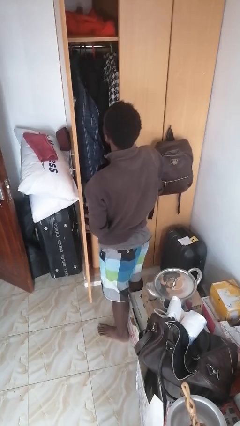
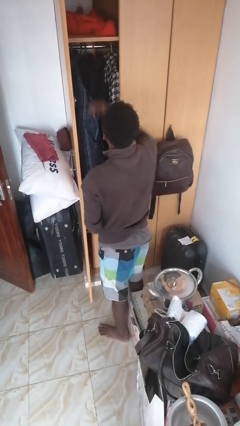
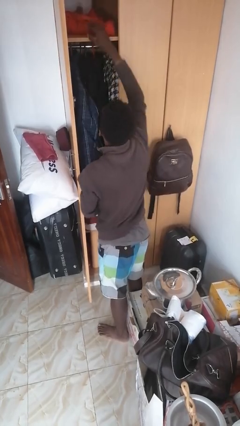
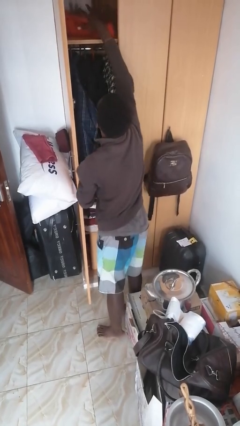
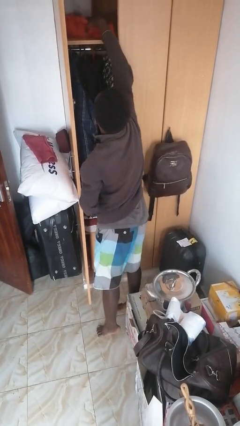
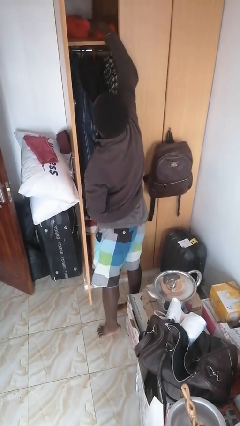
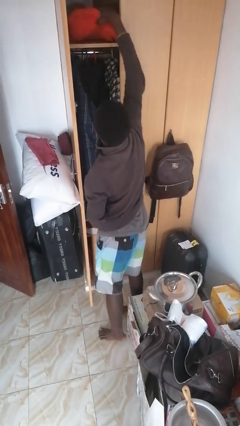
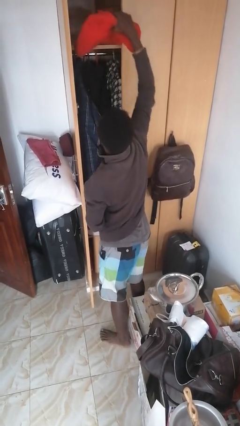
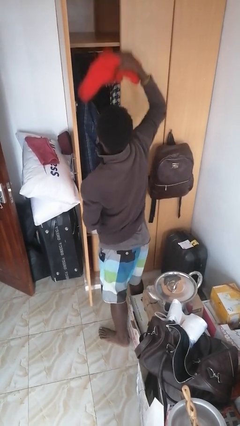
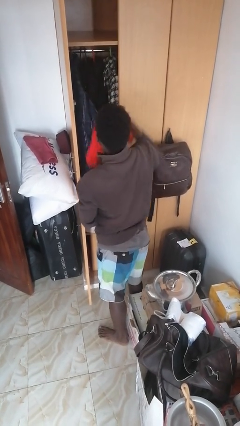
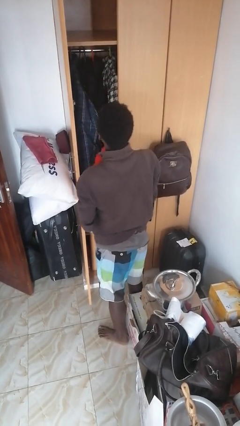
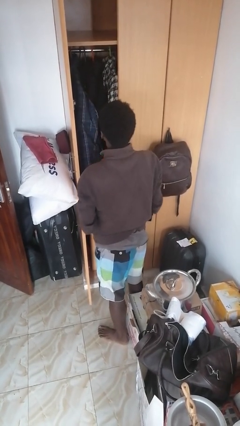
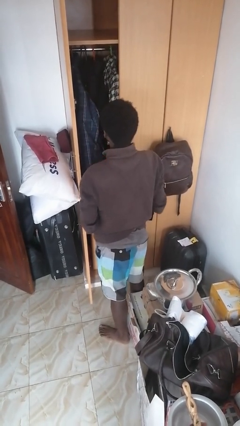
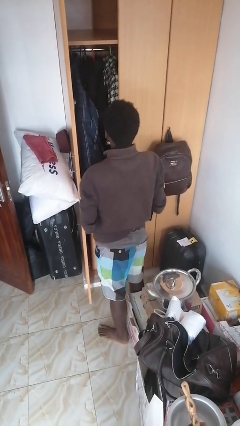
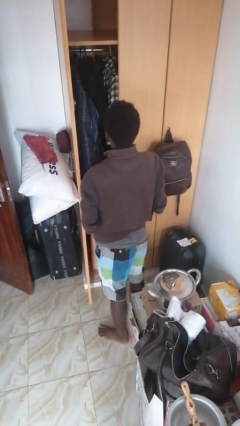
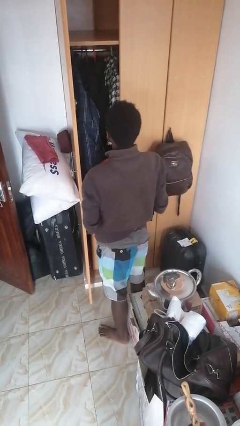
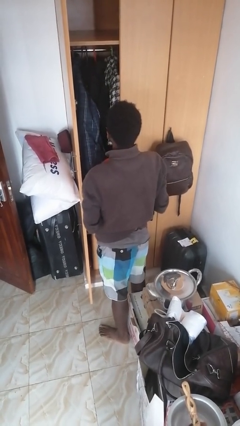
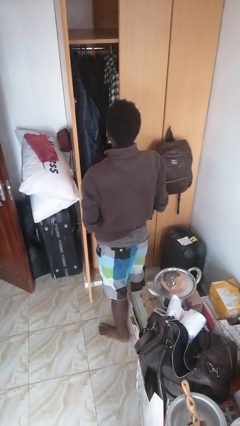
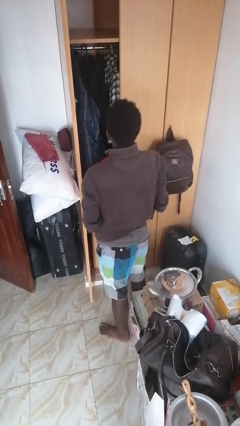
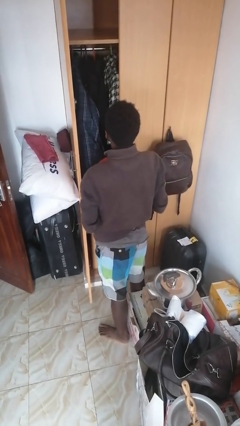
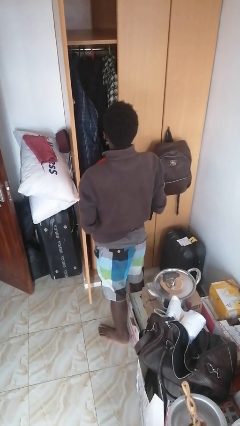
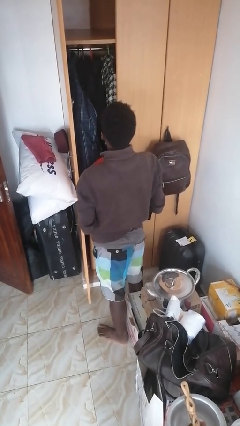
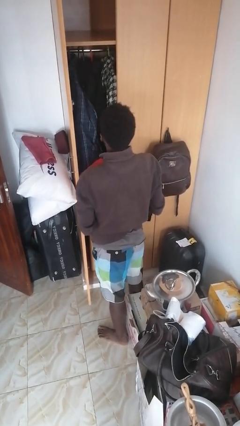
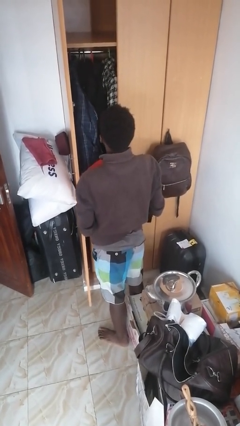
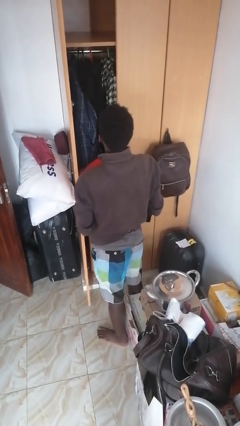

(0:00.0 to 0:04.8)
person picks up object from shelf

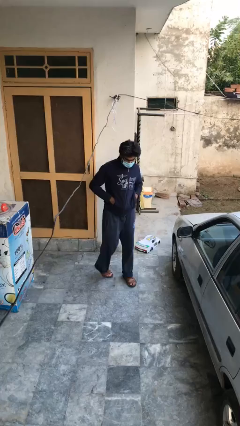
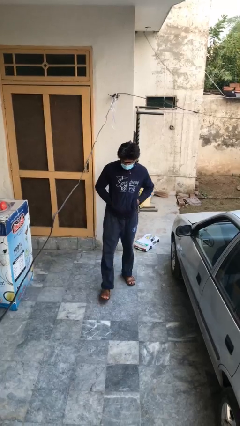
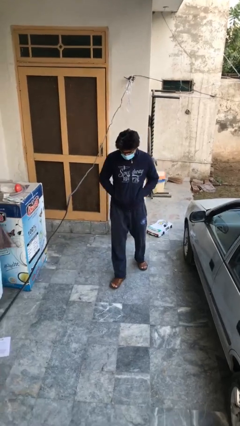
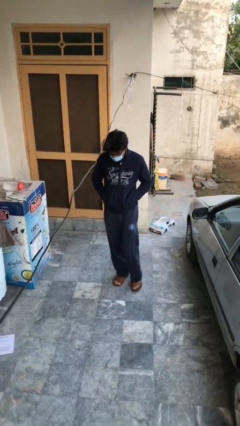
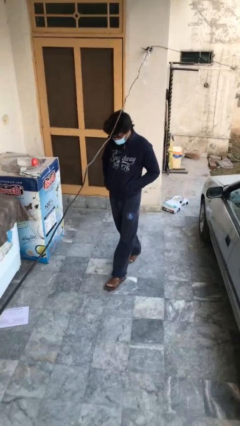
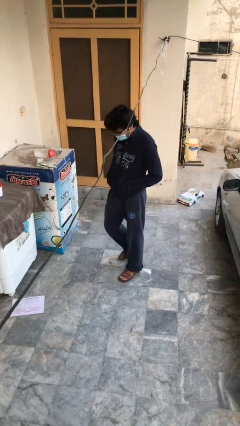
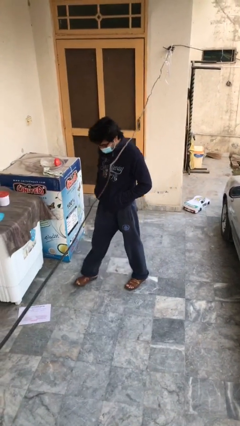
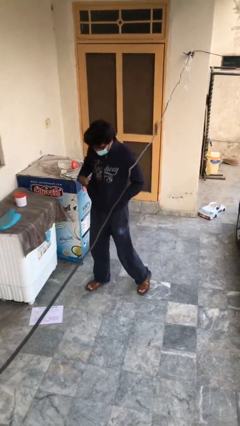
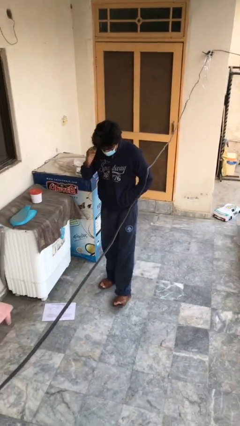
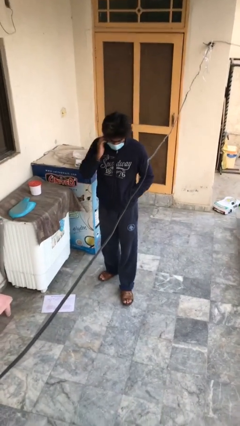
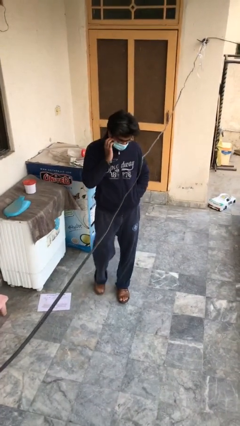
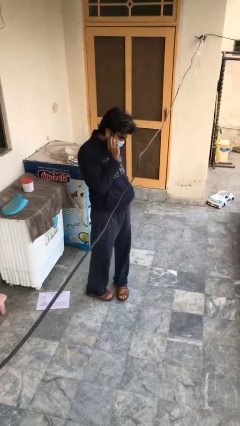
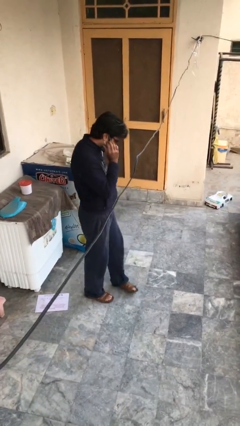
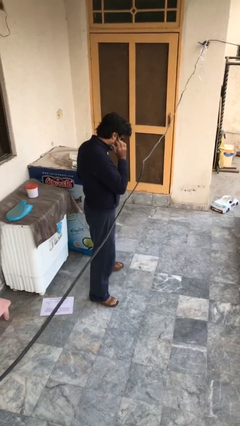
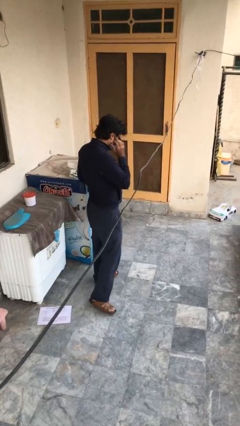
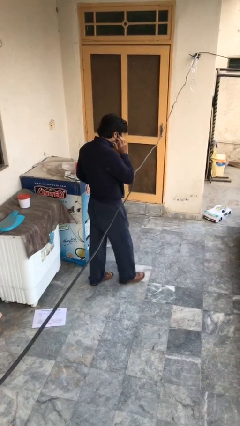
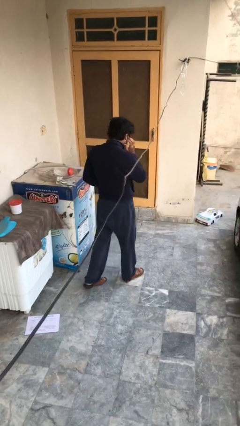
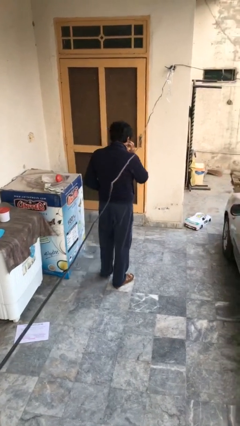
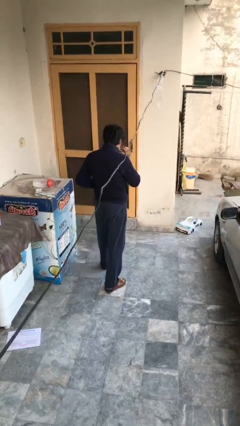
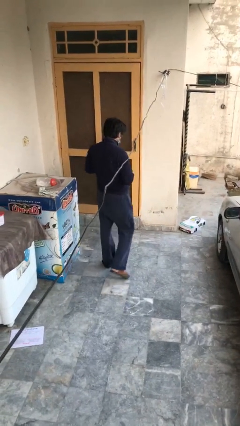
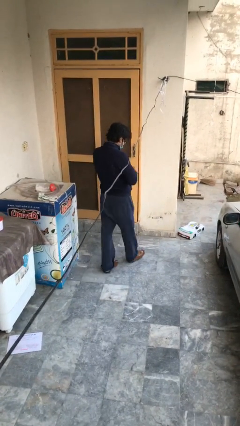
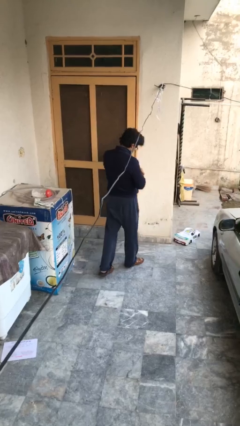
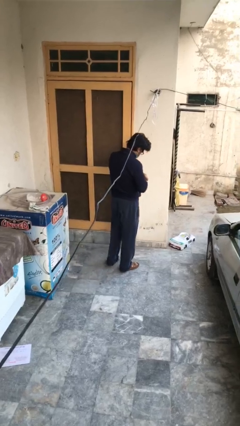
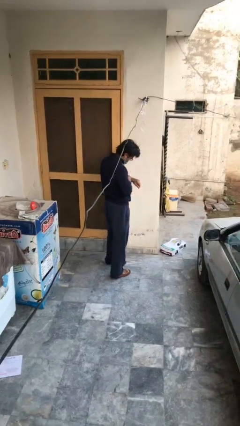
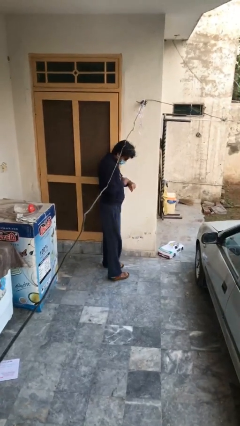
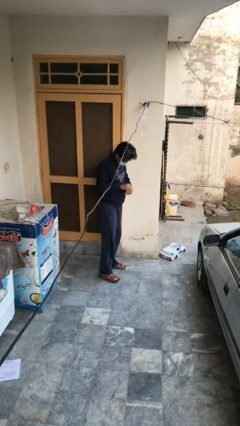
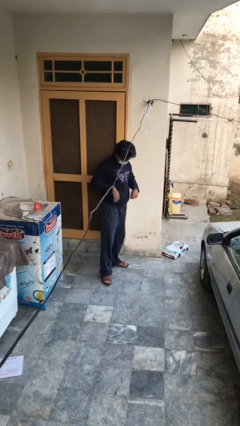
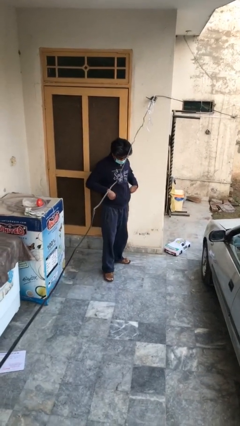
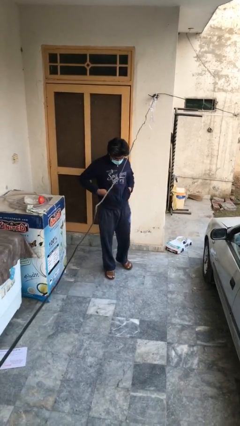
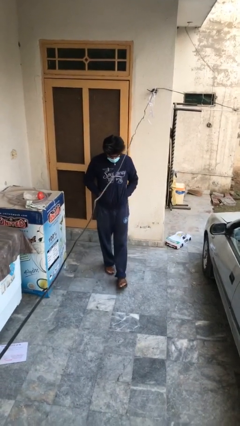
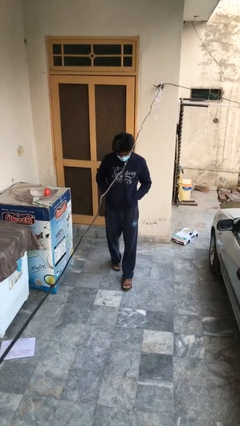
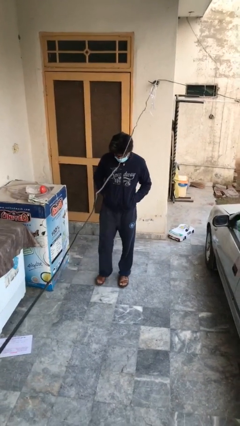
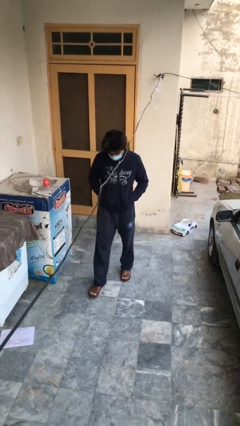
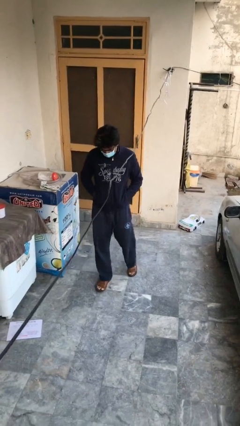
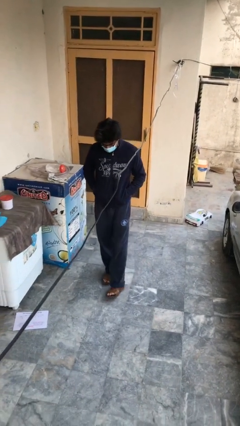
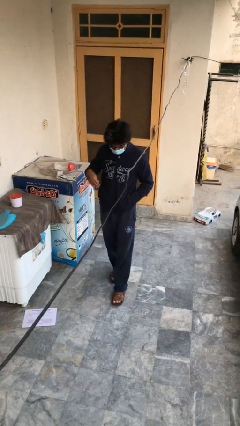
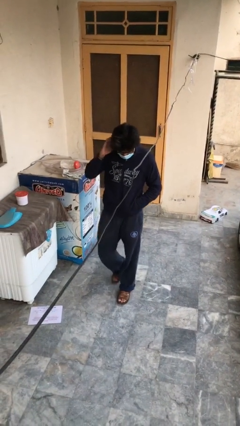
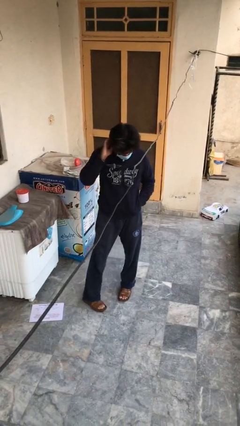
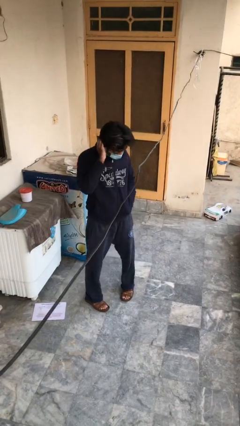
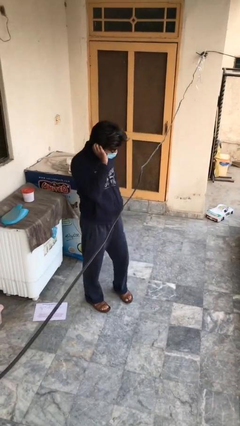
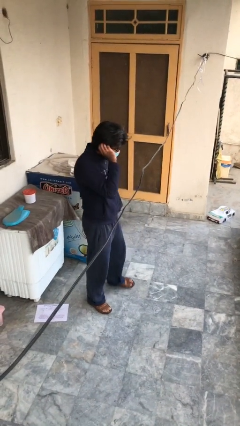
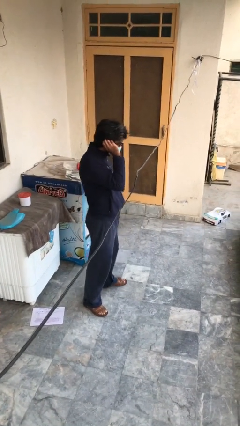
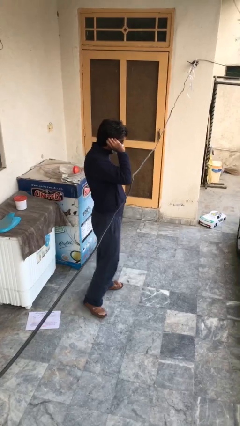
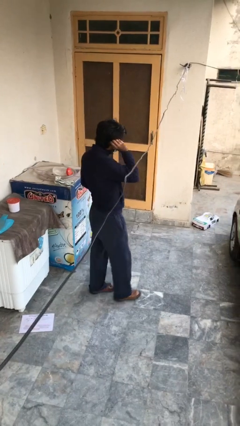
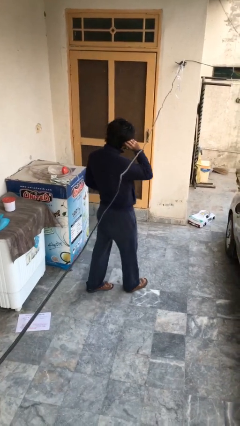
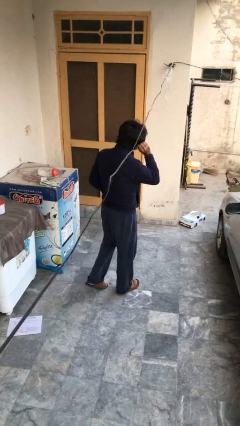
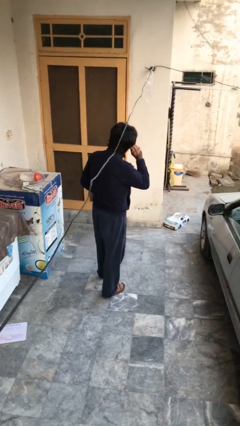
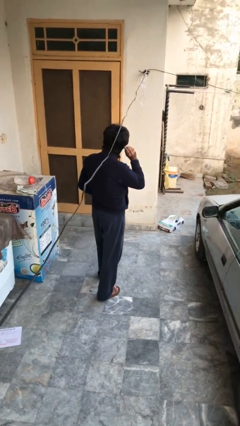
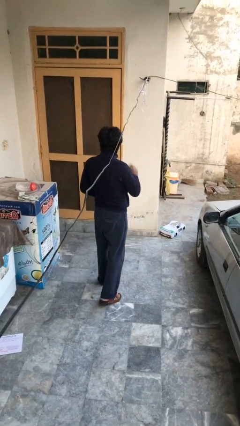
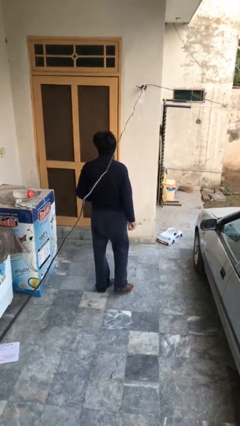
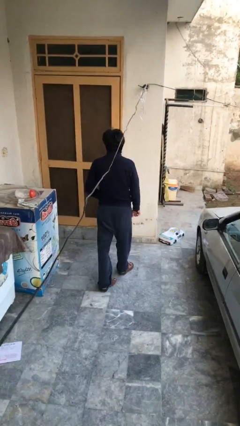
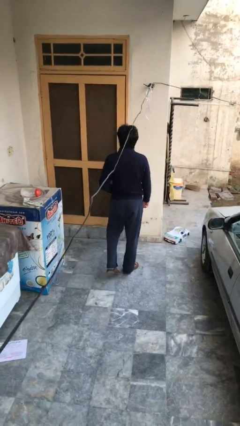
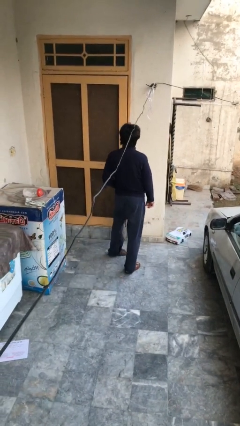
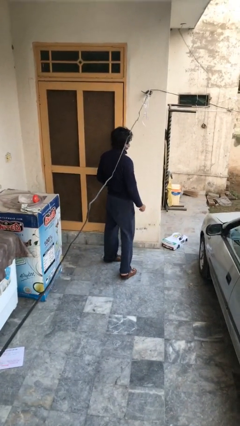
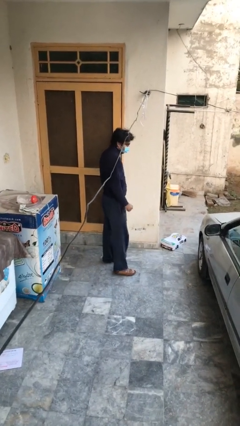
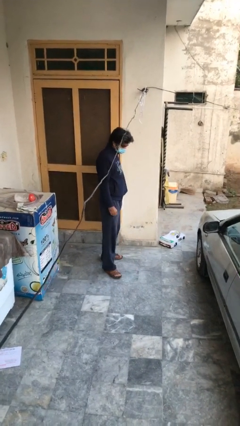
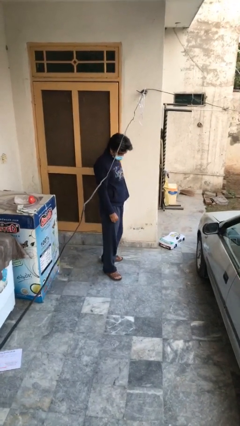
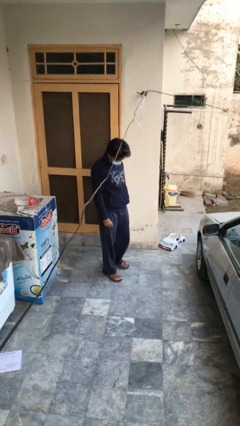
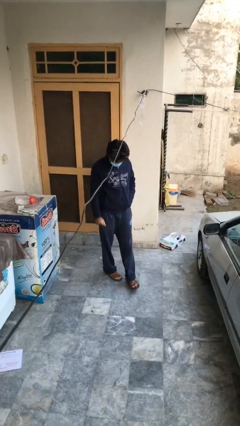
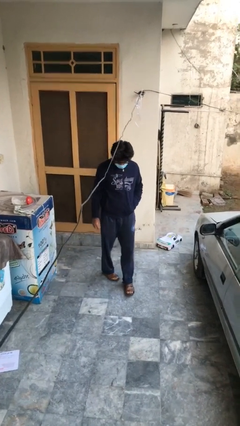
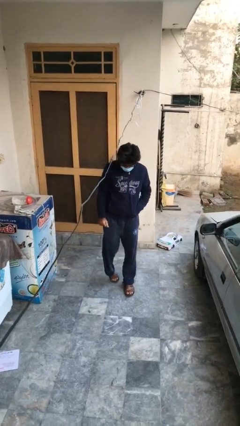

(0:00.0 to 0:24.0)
person walks

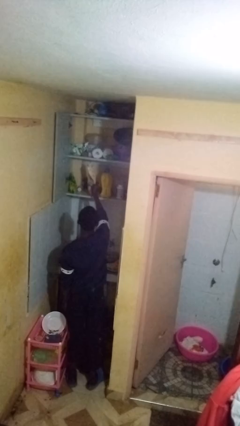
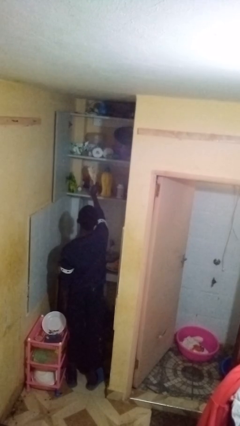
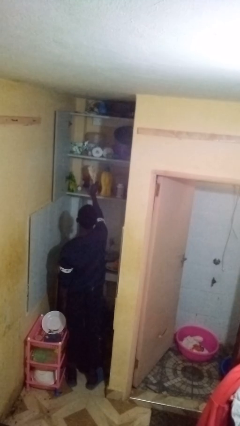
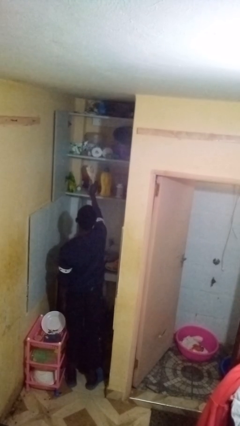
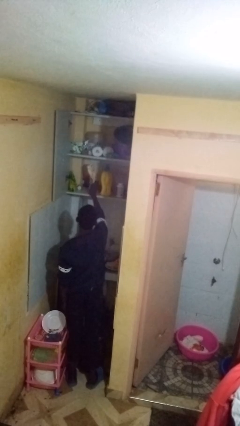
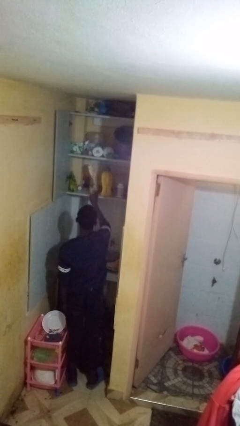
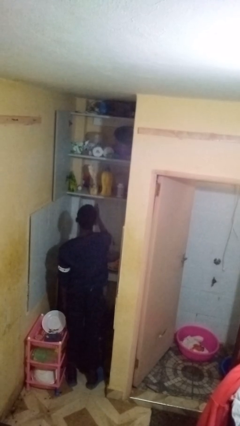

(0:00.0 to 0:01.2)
person puts object in cabinet
